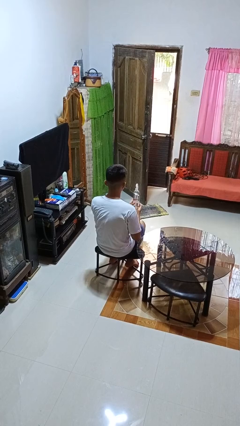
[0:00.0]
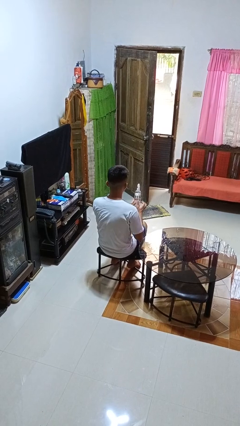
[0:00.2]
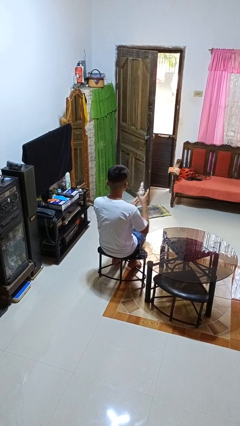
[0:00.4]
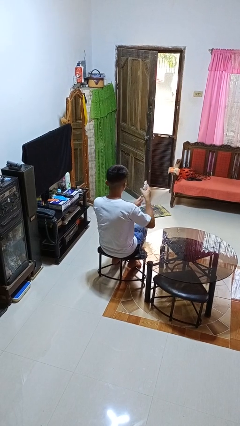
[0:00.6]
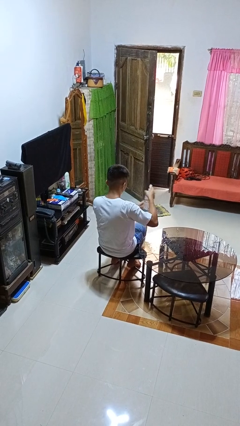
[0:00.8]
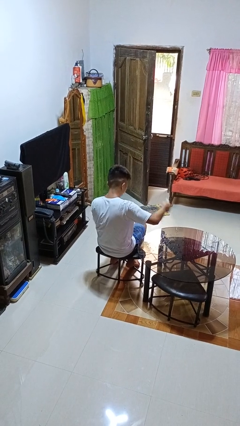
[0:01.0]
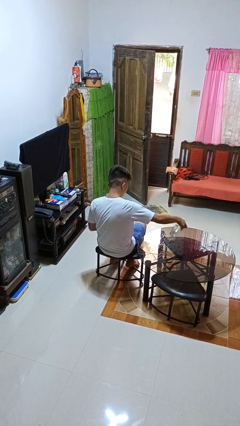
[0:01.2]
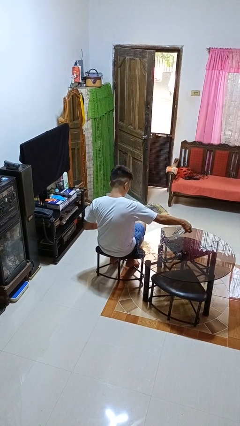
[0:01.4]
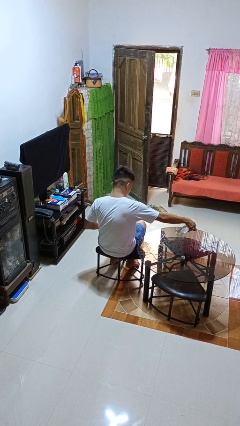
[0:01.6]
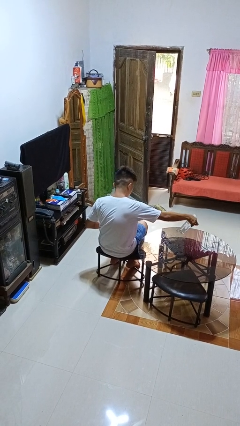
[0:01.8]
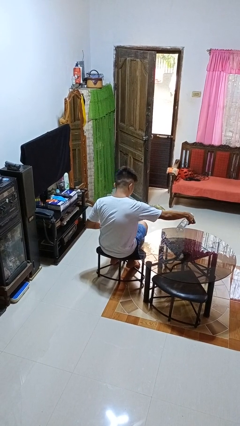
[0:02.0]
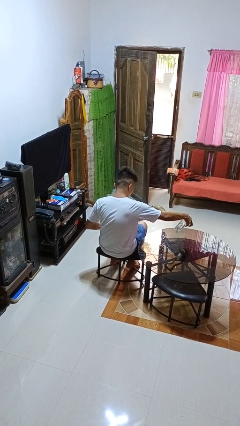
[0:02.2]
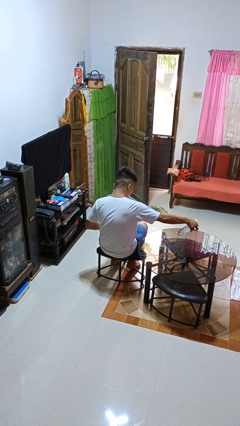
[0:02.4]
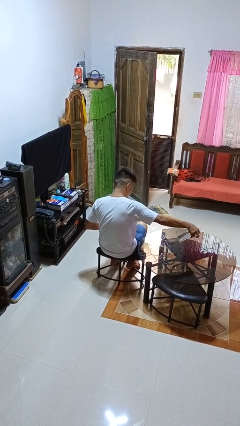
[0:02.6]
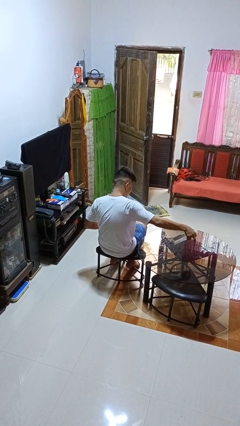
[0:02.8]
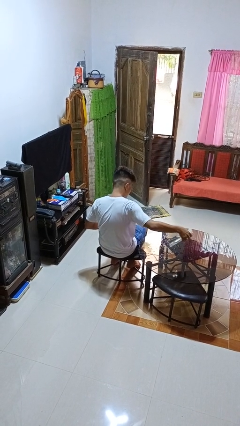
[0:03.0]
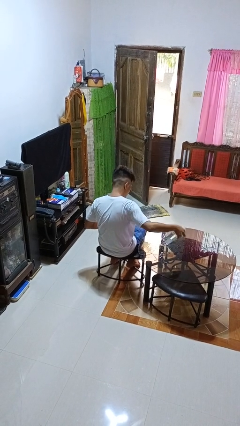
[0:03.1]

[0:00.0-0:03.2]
person sprays from bottle

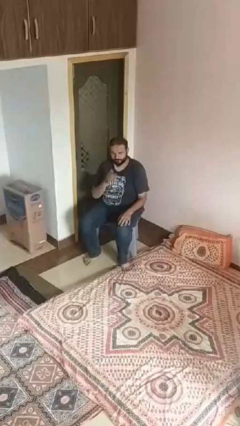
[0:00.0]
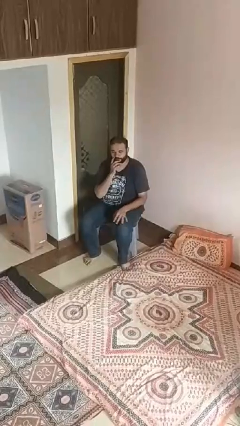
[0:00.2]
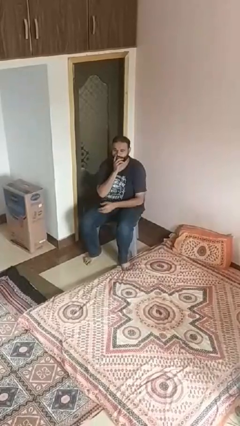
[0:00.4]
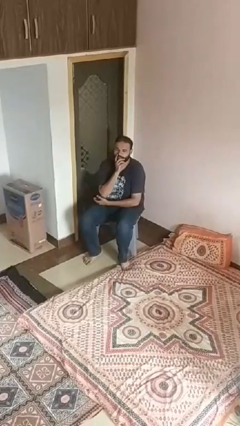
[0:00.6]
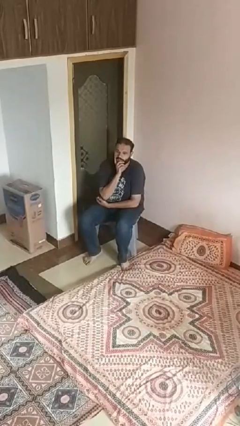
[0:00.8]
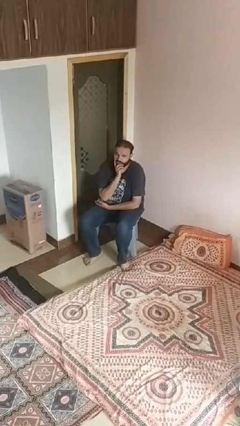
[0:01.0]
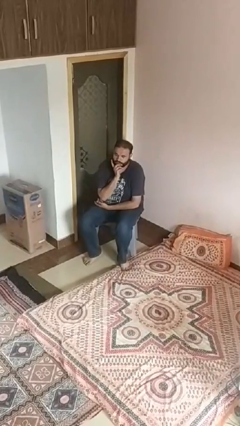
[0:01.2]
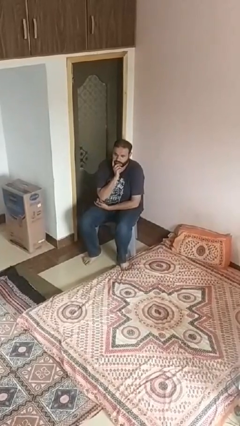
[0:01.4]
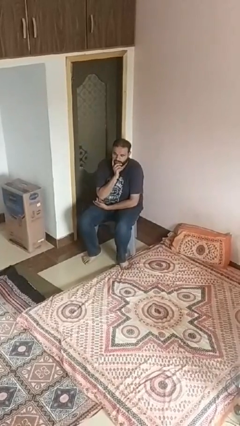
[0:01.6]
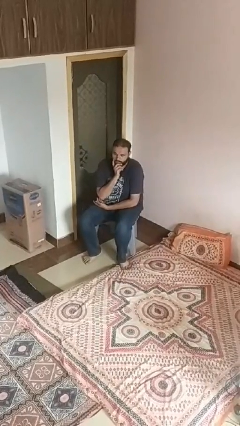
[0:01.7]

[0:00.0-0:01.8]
person strokes chin

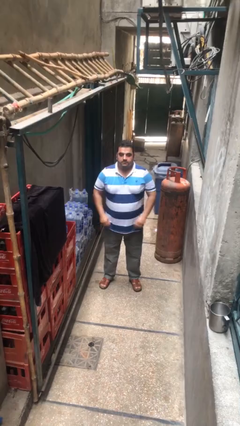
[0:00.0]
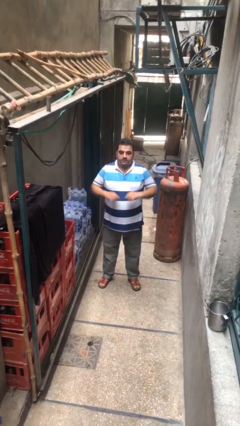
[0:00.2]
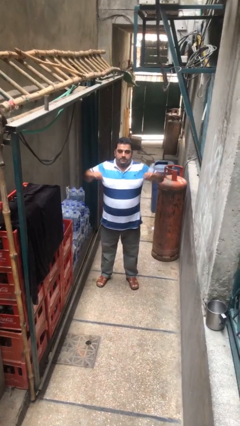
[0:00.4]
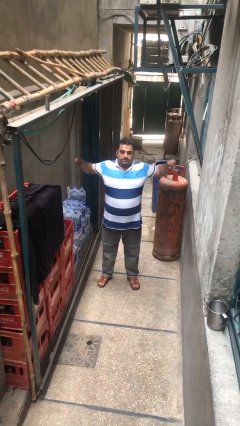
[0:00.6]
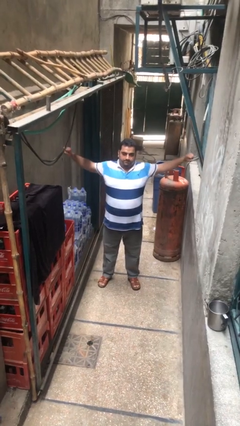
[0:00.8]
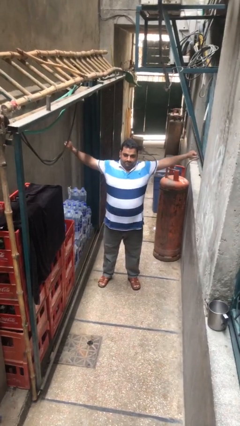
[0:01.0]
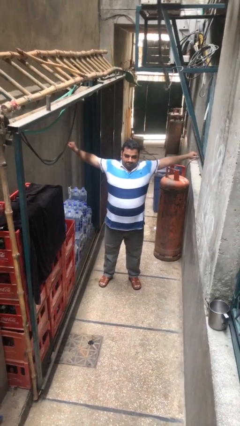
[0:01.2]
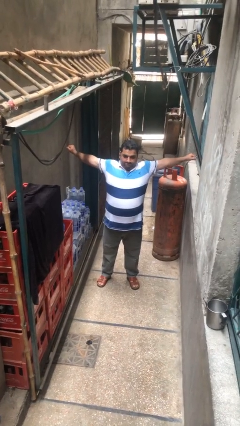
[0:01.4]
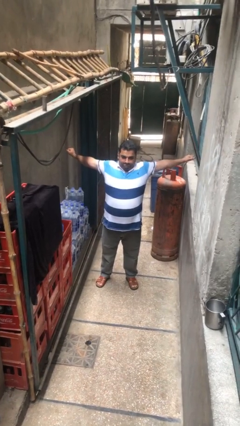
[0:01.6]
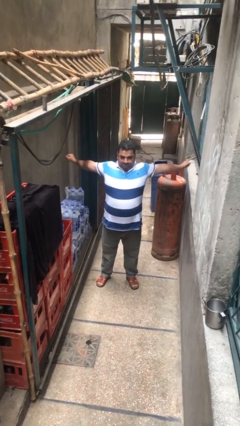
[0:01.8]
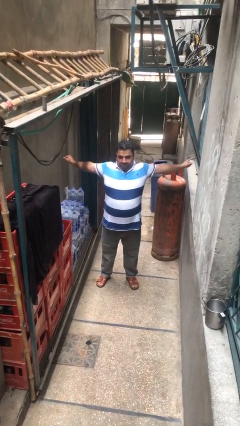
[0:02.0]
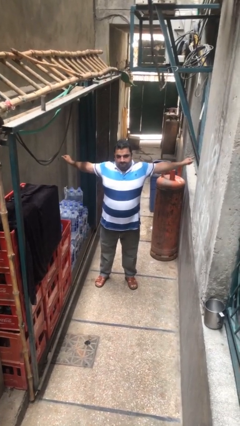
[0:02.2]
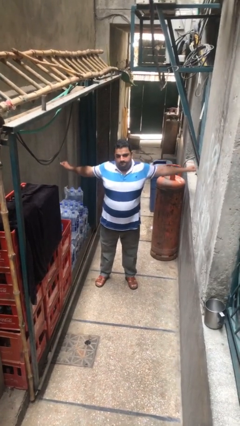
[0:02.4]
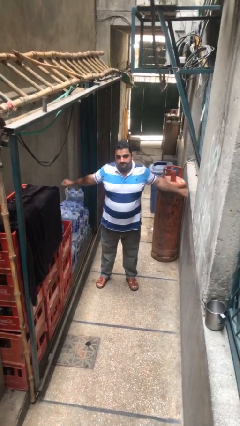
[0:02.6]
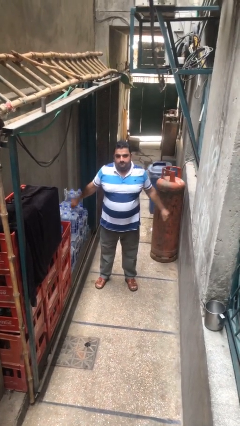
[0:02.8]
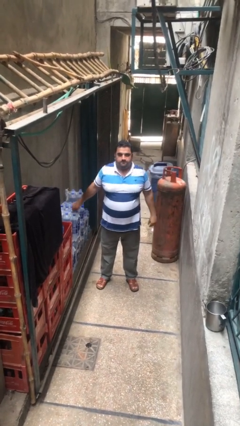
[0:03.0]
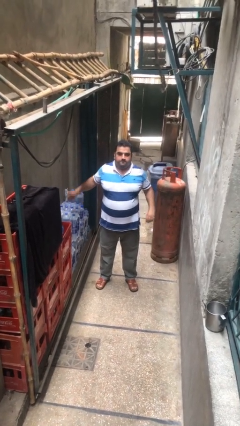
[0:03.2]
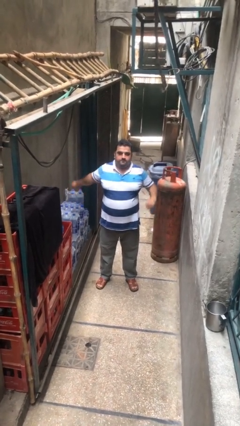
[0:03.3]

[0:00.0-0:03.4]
person stretches arms to side

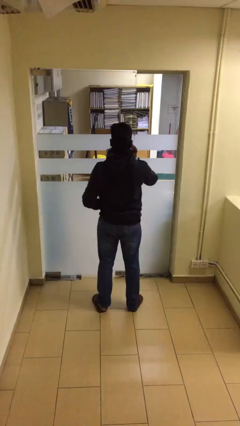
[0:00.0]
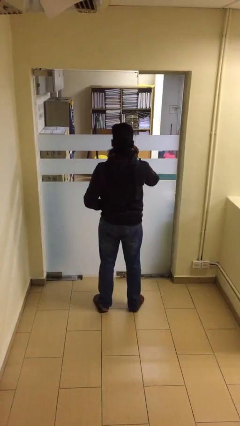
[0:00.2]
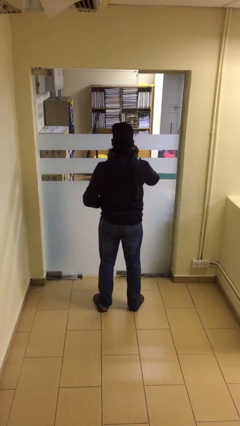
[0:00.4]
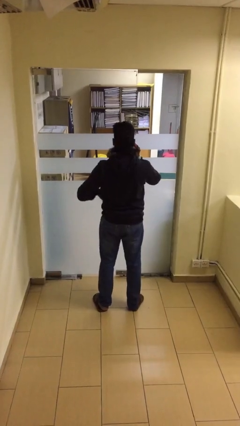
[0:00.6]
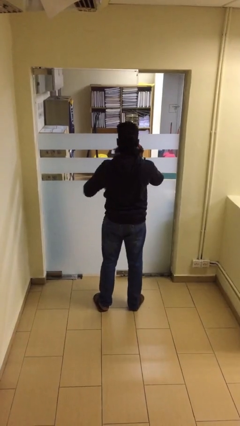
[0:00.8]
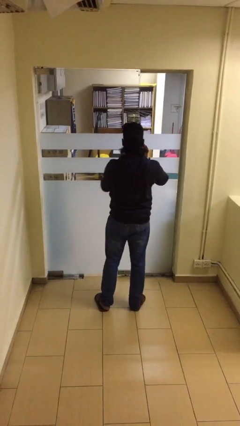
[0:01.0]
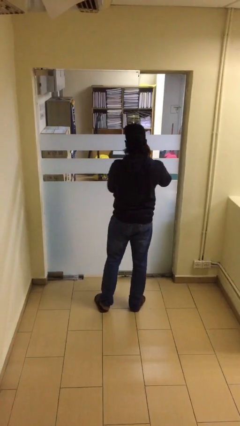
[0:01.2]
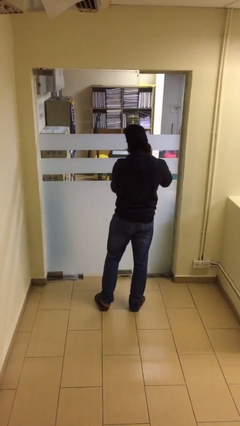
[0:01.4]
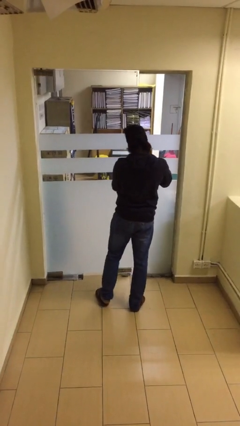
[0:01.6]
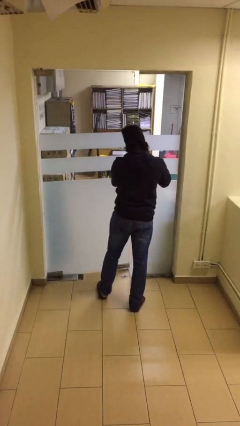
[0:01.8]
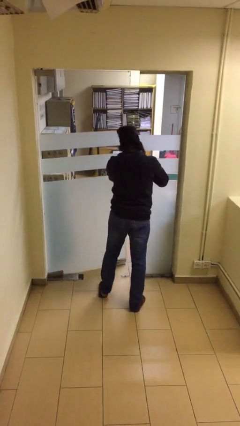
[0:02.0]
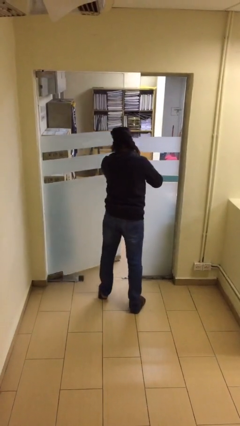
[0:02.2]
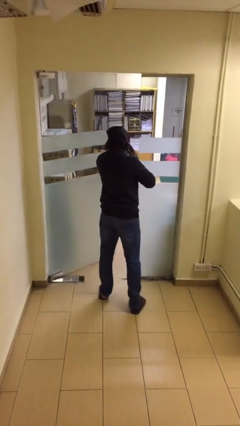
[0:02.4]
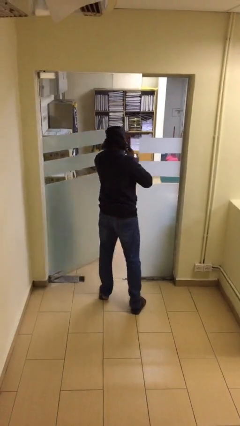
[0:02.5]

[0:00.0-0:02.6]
person opens facility door

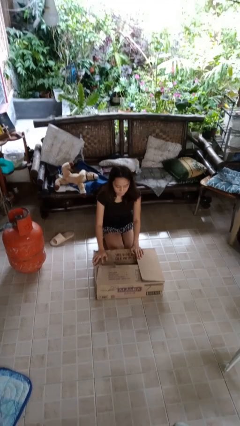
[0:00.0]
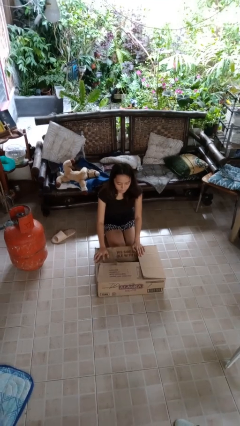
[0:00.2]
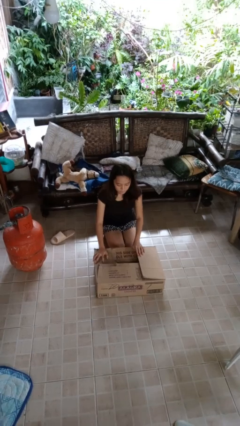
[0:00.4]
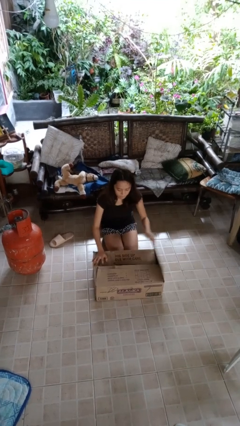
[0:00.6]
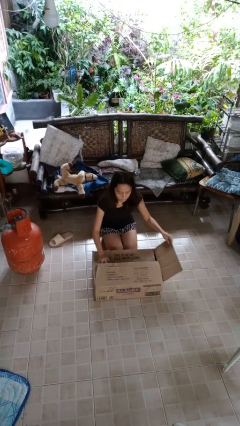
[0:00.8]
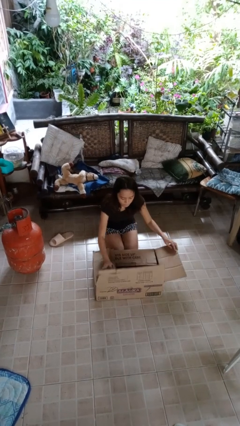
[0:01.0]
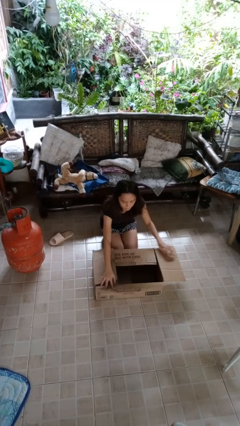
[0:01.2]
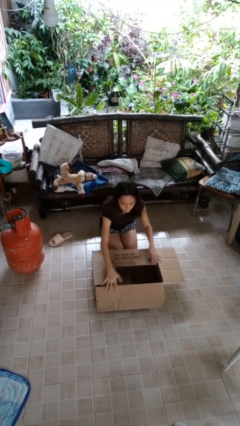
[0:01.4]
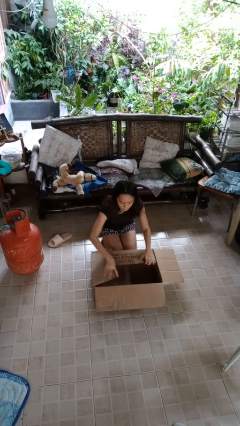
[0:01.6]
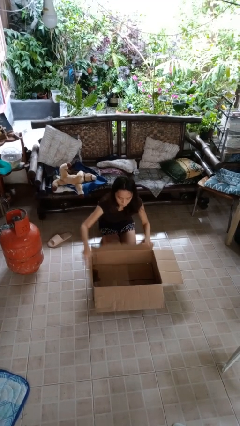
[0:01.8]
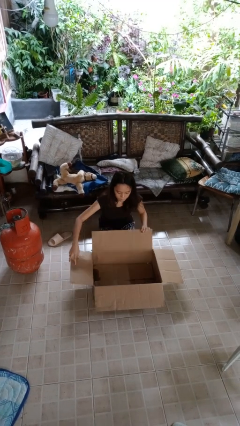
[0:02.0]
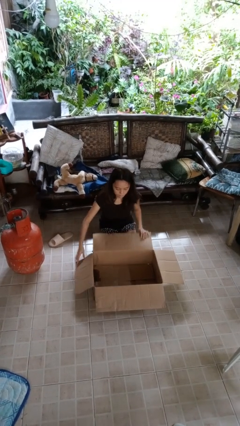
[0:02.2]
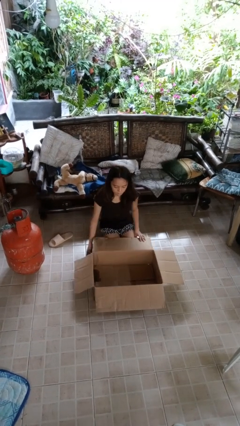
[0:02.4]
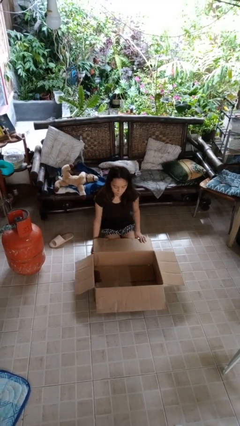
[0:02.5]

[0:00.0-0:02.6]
person opens box

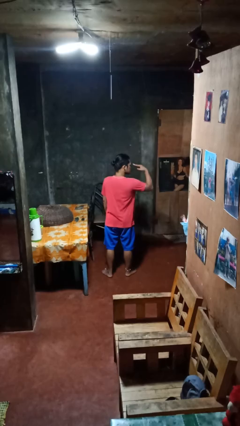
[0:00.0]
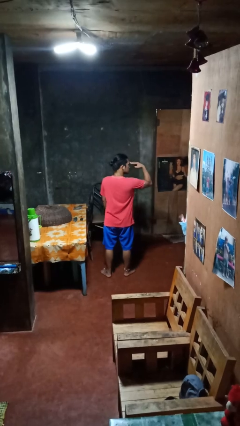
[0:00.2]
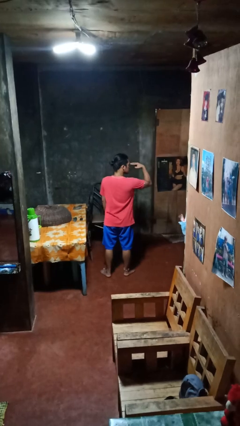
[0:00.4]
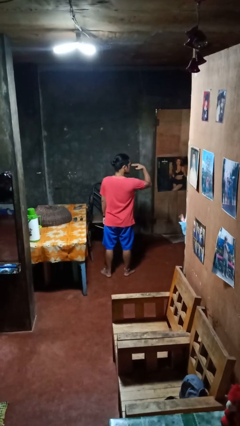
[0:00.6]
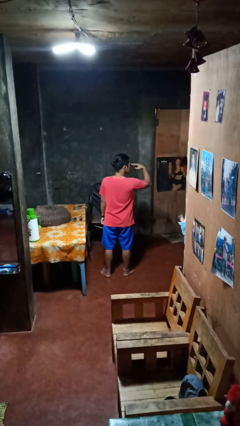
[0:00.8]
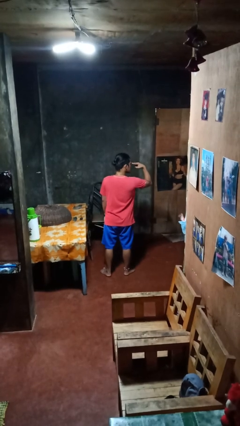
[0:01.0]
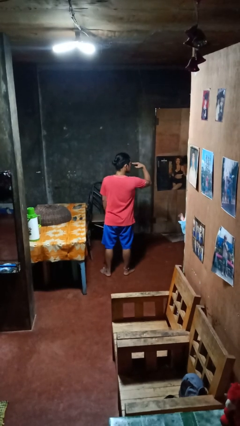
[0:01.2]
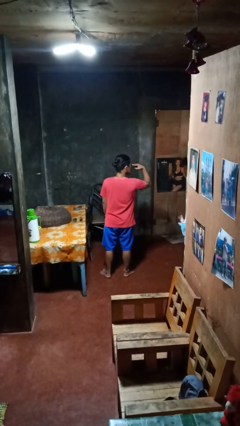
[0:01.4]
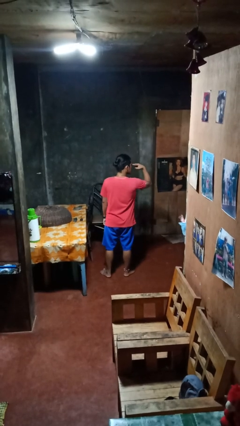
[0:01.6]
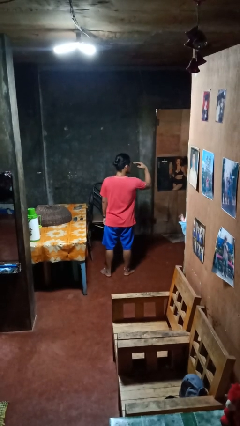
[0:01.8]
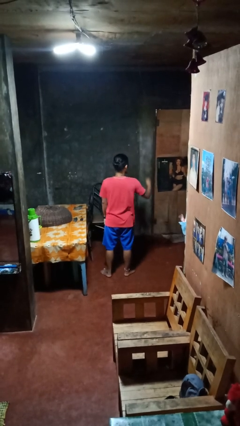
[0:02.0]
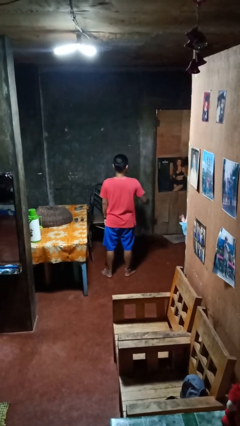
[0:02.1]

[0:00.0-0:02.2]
person gestures watch closely

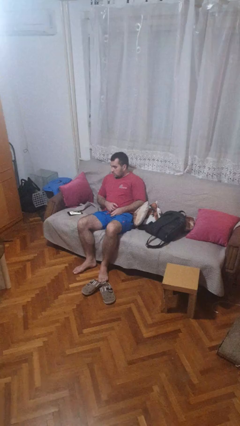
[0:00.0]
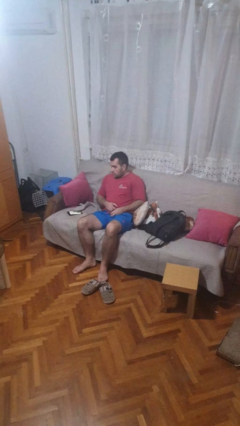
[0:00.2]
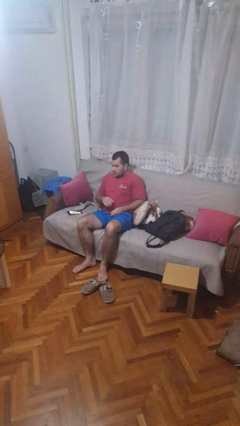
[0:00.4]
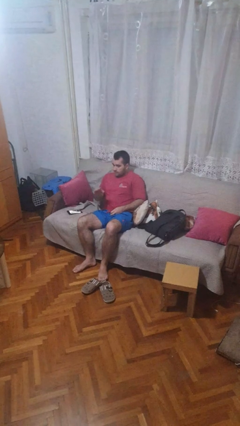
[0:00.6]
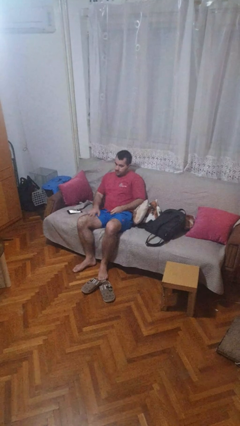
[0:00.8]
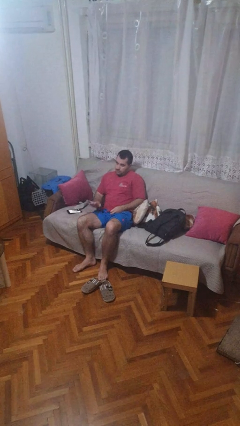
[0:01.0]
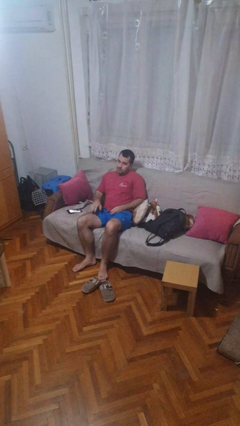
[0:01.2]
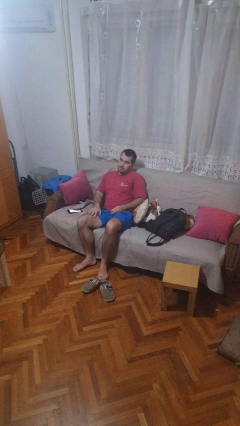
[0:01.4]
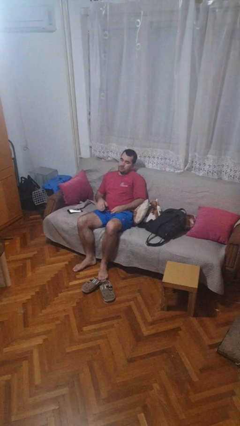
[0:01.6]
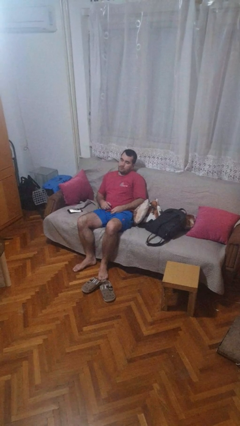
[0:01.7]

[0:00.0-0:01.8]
person slaps hands on thighs
